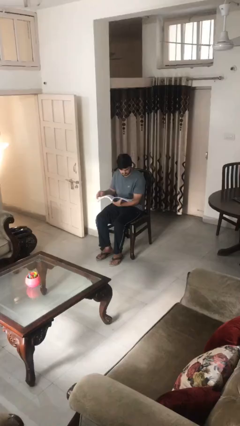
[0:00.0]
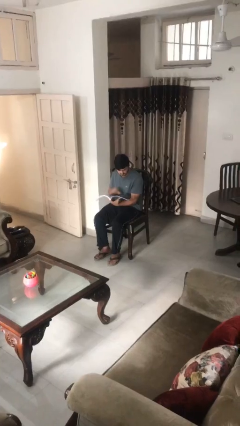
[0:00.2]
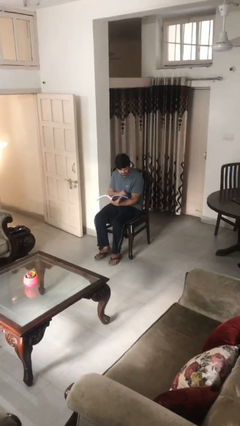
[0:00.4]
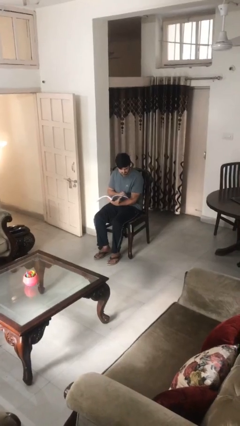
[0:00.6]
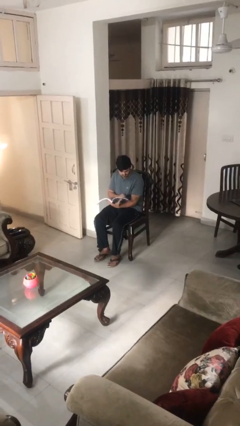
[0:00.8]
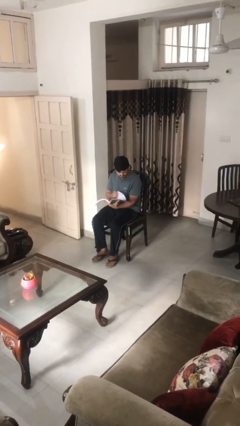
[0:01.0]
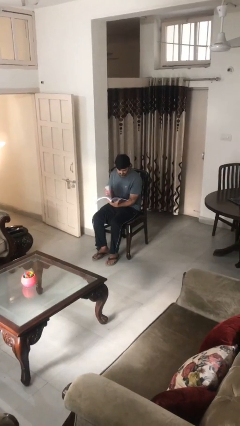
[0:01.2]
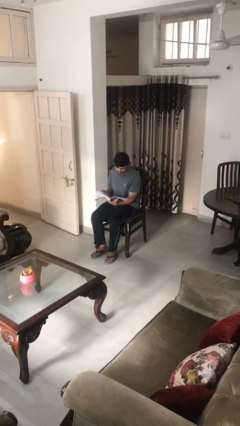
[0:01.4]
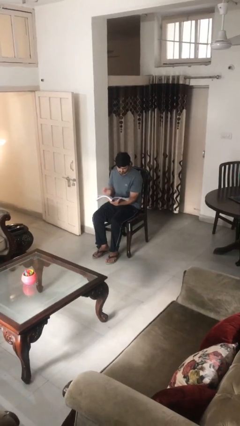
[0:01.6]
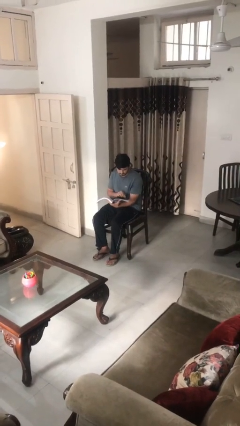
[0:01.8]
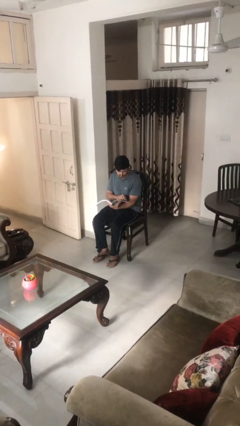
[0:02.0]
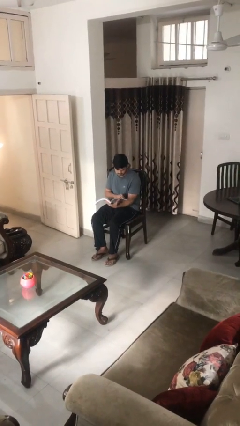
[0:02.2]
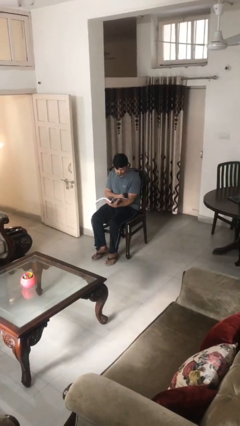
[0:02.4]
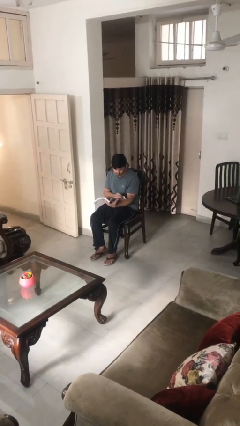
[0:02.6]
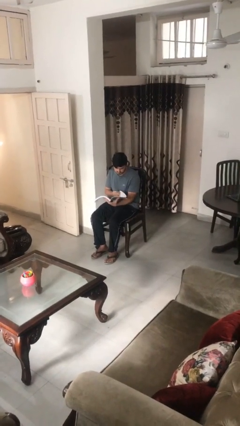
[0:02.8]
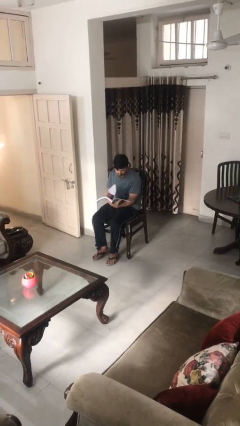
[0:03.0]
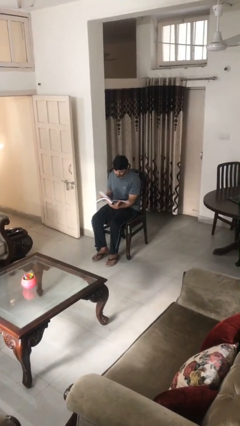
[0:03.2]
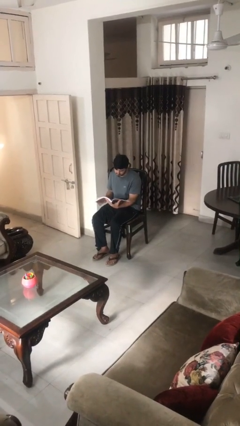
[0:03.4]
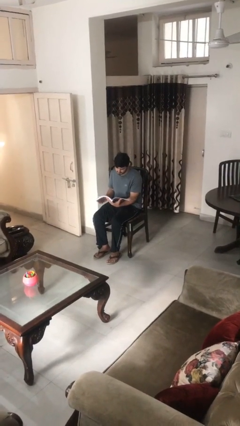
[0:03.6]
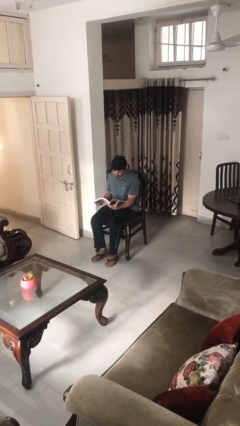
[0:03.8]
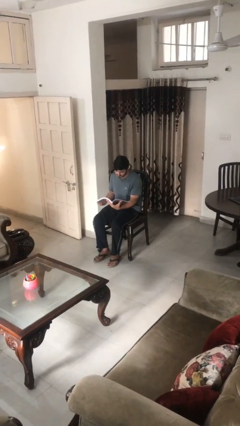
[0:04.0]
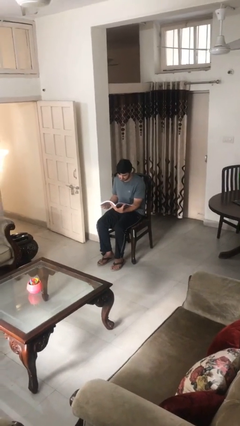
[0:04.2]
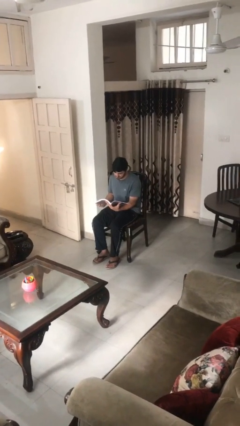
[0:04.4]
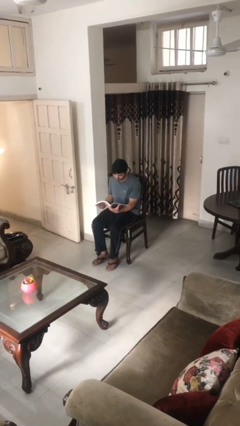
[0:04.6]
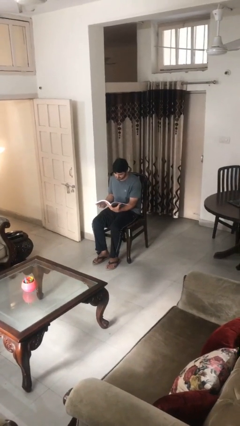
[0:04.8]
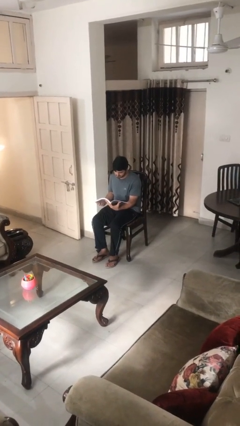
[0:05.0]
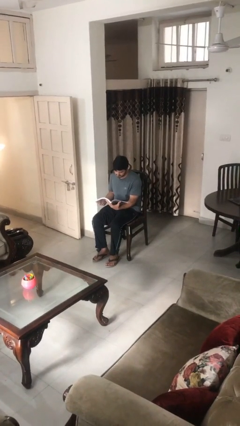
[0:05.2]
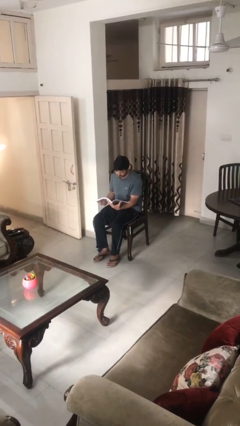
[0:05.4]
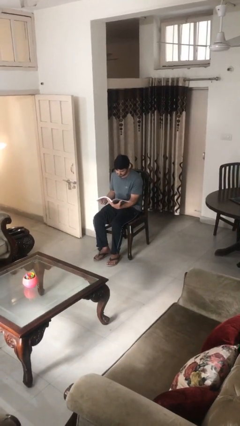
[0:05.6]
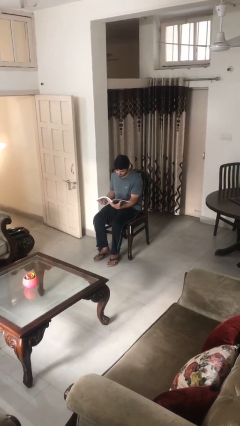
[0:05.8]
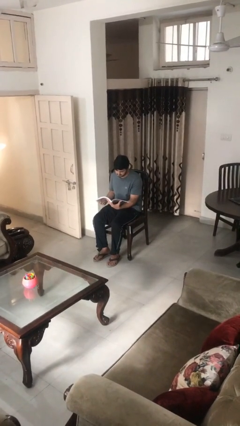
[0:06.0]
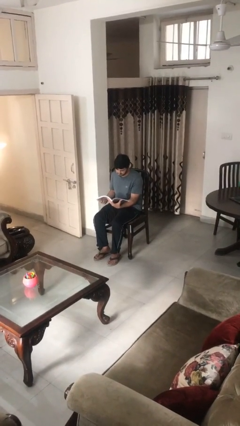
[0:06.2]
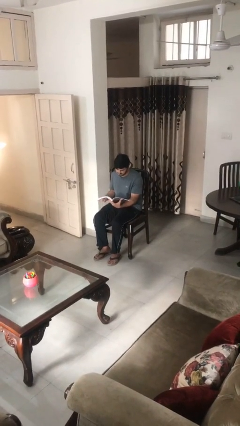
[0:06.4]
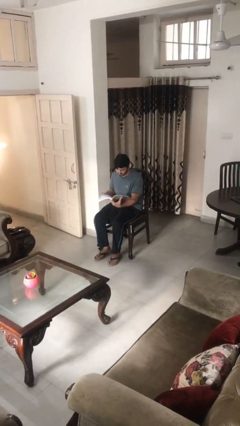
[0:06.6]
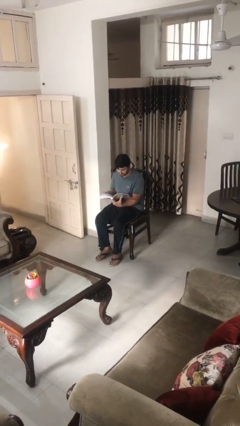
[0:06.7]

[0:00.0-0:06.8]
person reads document

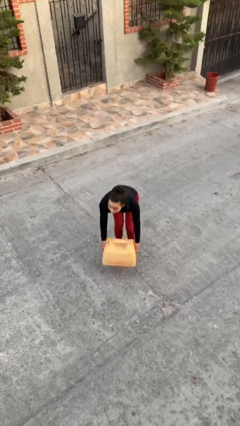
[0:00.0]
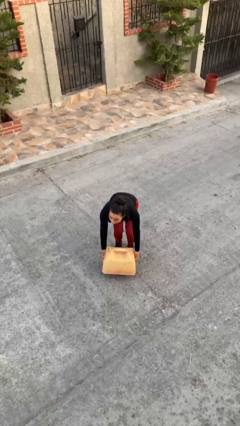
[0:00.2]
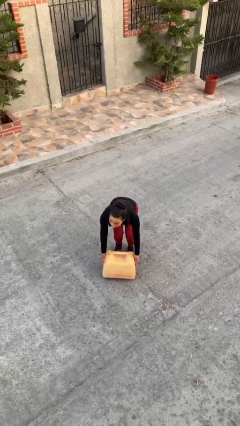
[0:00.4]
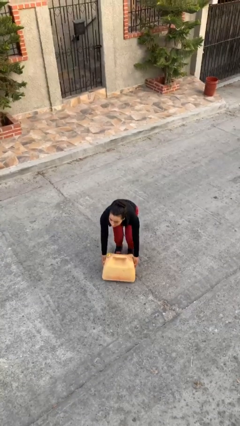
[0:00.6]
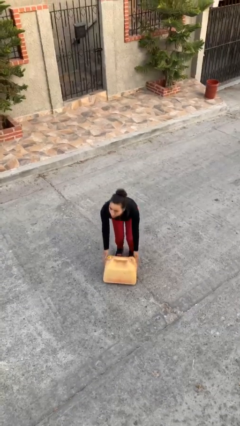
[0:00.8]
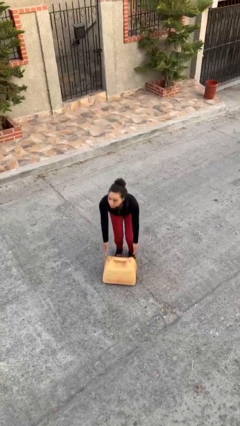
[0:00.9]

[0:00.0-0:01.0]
person puts down object on floor

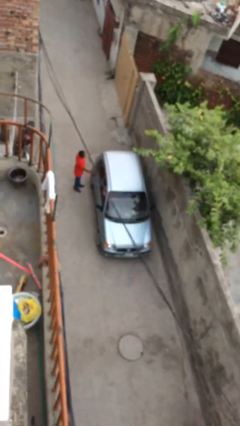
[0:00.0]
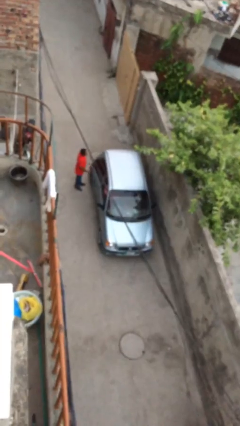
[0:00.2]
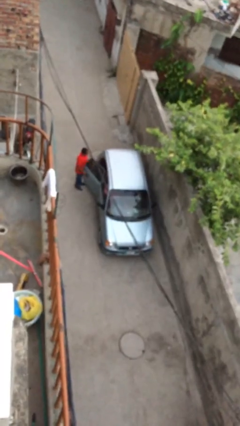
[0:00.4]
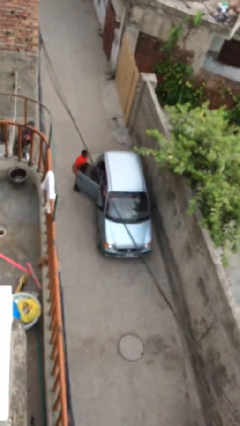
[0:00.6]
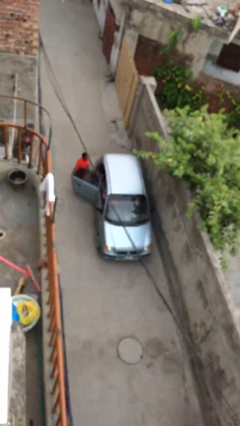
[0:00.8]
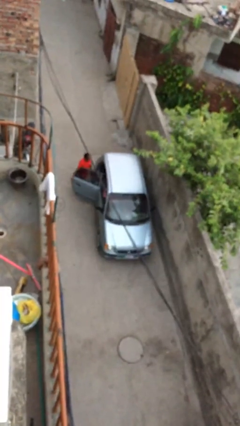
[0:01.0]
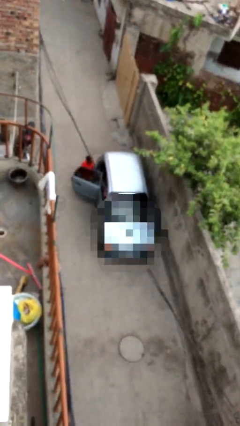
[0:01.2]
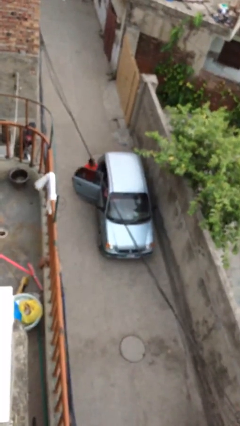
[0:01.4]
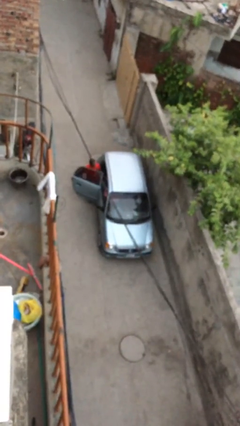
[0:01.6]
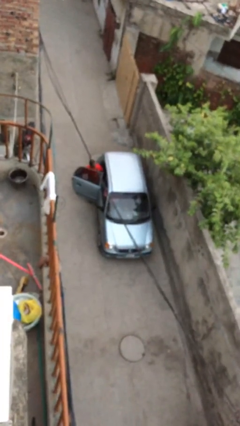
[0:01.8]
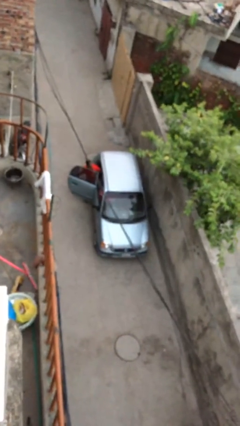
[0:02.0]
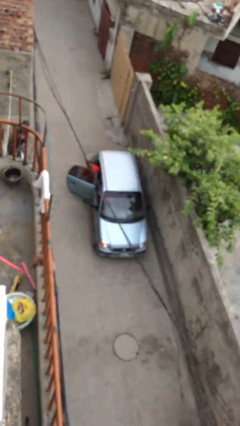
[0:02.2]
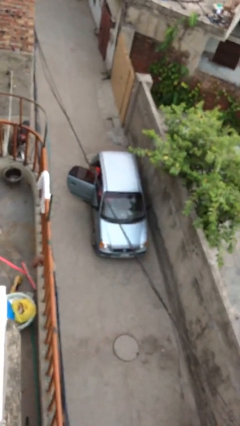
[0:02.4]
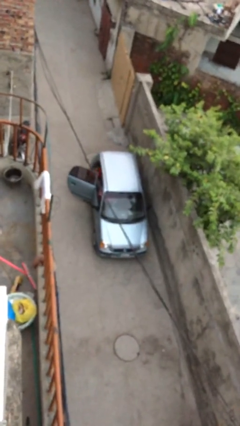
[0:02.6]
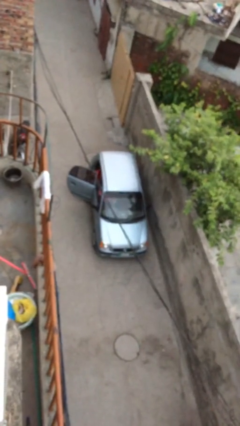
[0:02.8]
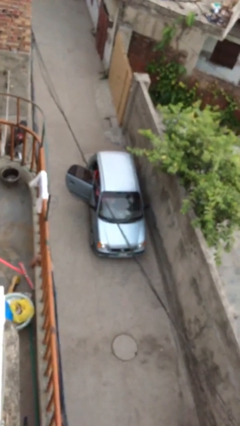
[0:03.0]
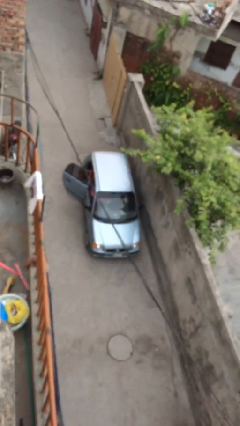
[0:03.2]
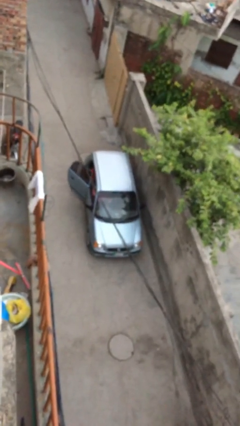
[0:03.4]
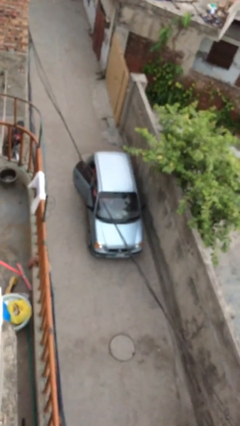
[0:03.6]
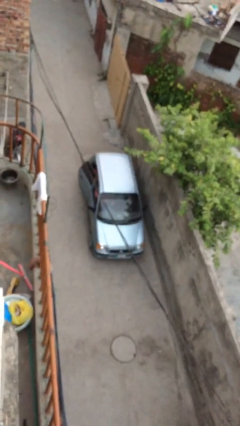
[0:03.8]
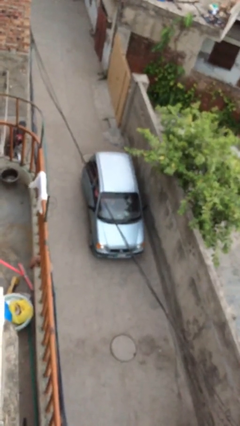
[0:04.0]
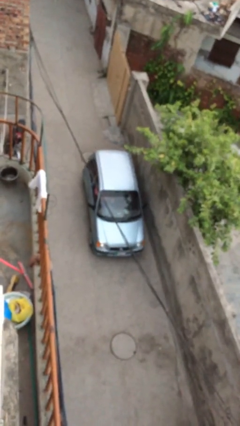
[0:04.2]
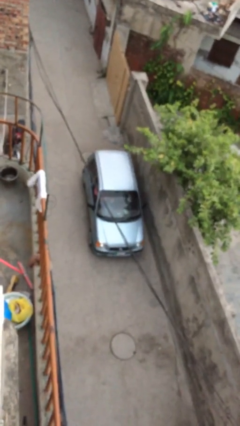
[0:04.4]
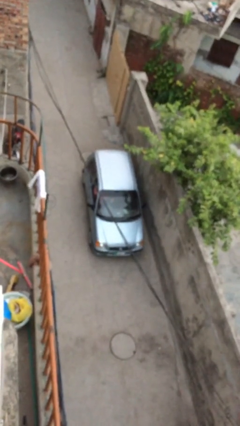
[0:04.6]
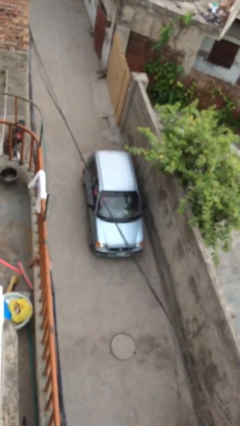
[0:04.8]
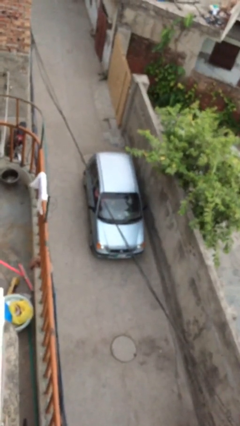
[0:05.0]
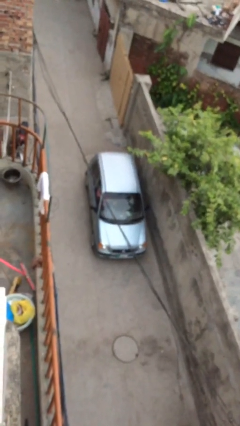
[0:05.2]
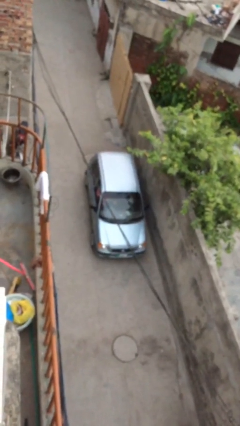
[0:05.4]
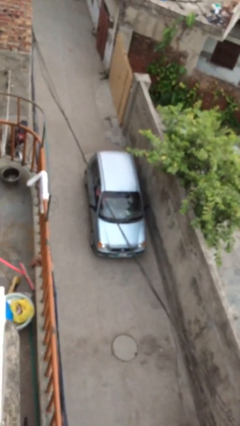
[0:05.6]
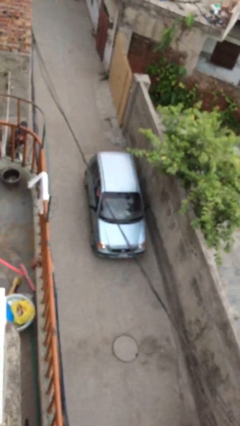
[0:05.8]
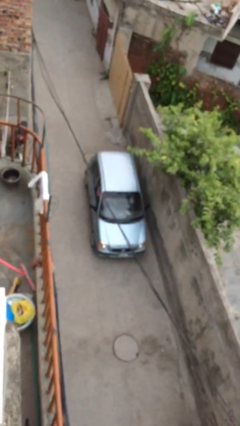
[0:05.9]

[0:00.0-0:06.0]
car picks up person

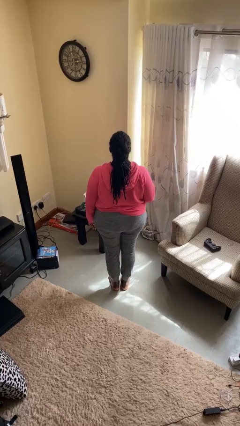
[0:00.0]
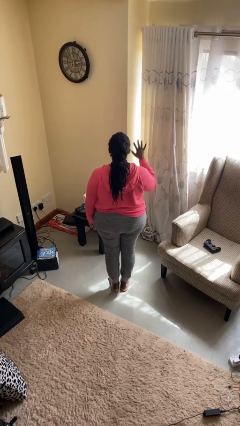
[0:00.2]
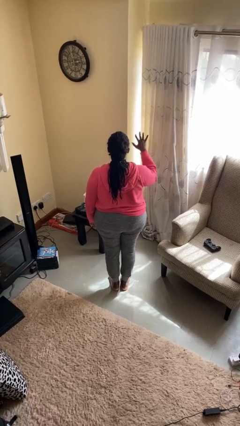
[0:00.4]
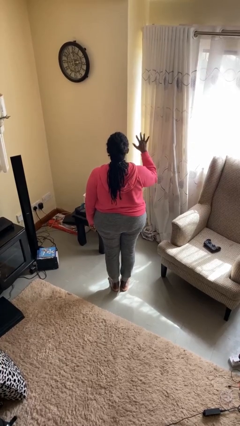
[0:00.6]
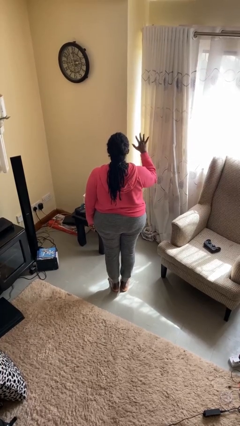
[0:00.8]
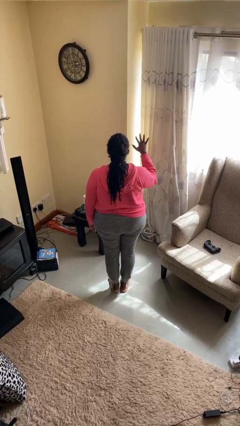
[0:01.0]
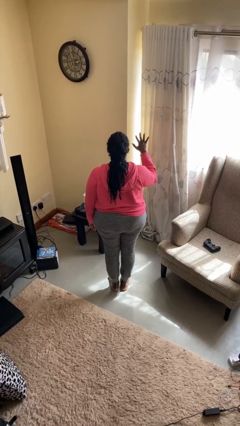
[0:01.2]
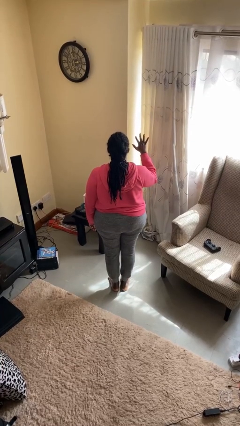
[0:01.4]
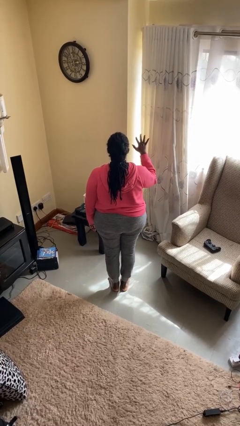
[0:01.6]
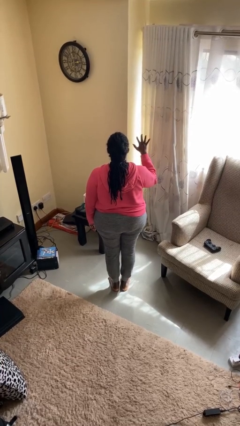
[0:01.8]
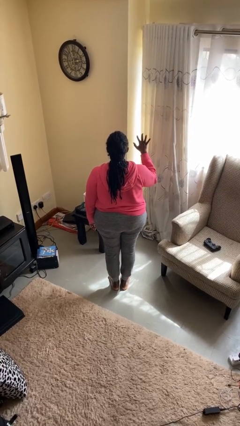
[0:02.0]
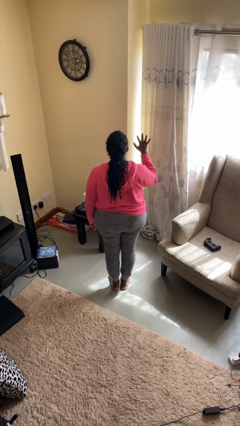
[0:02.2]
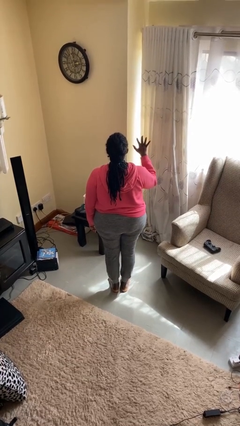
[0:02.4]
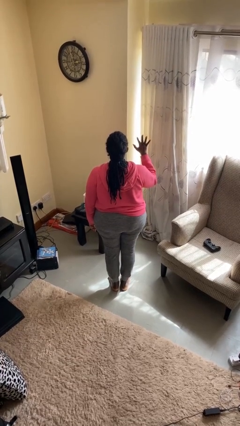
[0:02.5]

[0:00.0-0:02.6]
person gestures number five

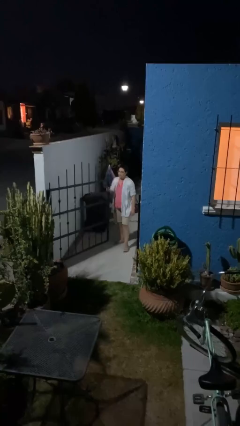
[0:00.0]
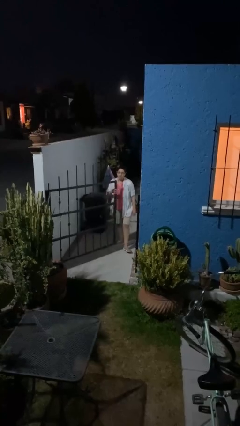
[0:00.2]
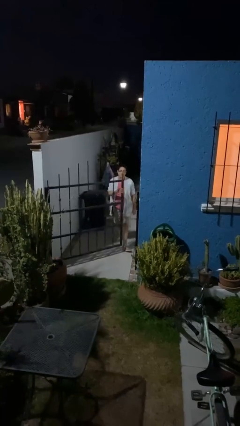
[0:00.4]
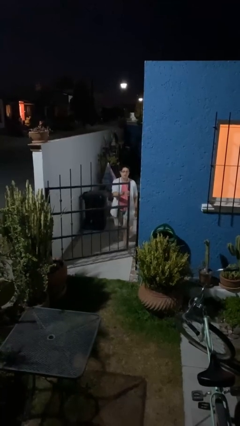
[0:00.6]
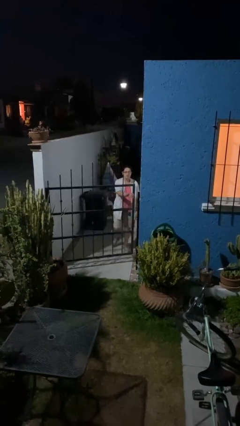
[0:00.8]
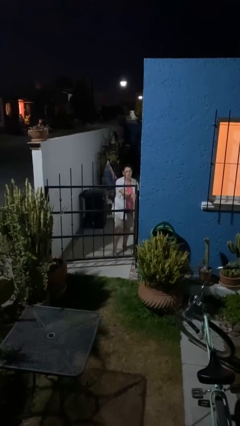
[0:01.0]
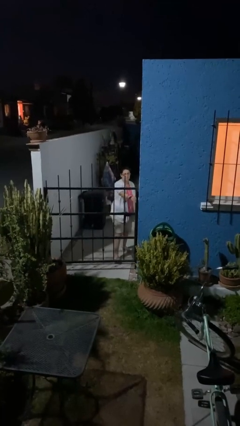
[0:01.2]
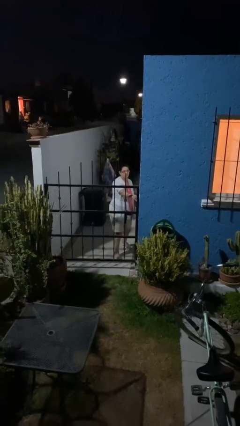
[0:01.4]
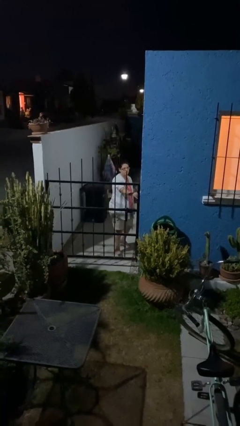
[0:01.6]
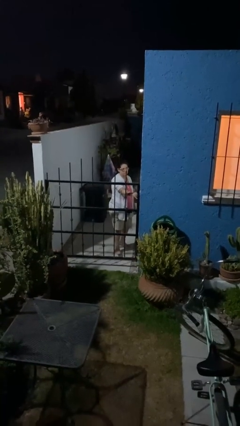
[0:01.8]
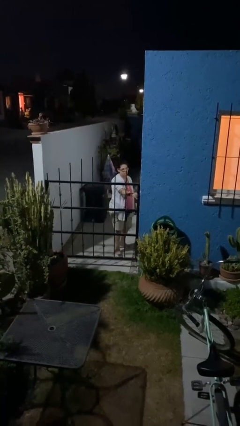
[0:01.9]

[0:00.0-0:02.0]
person closes facility door
